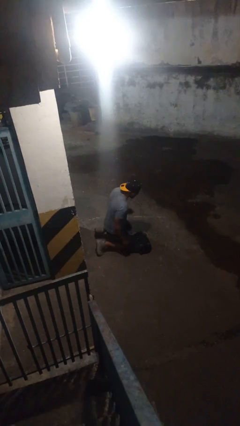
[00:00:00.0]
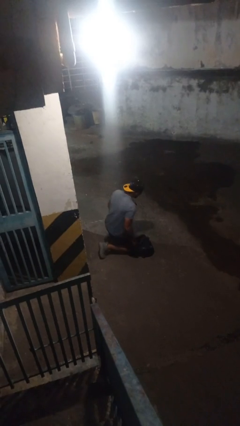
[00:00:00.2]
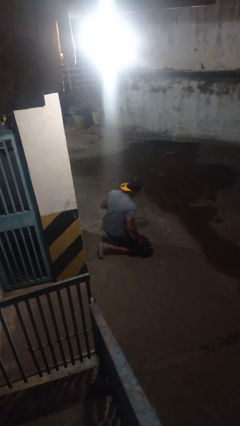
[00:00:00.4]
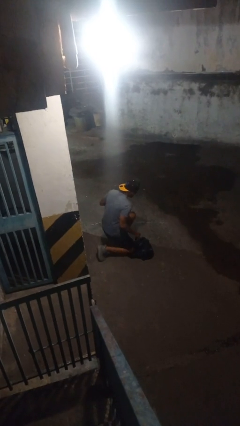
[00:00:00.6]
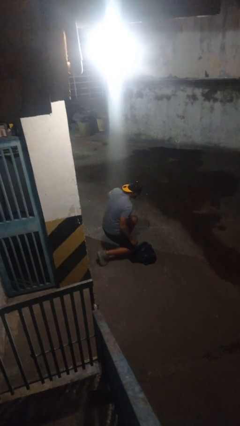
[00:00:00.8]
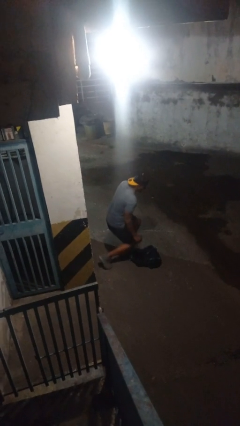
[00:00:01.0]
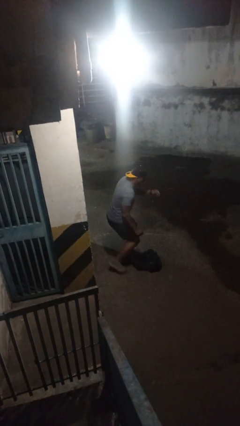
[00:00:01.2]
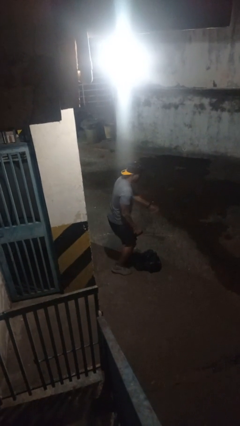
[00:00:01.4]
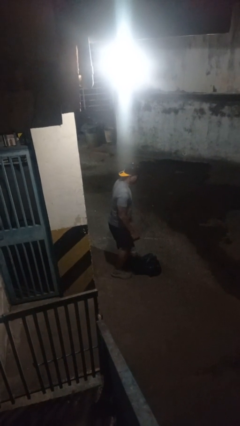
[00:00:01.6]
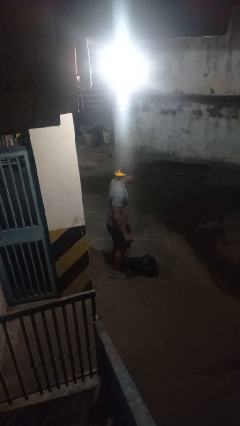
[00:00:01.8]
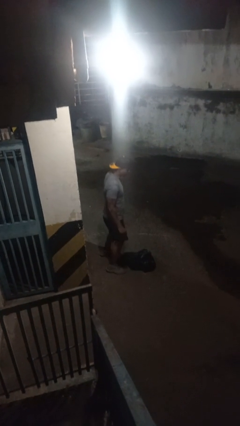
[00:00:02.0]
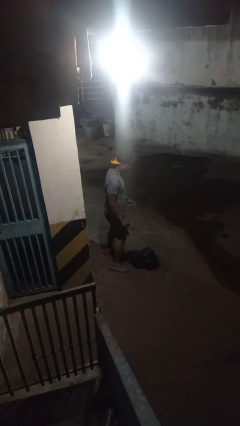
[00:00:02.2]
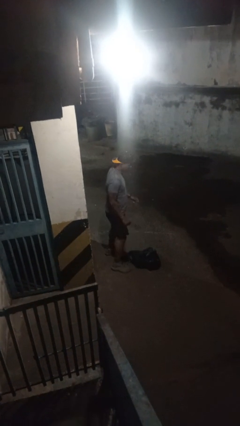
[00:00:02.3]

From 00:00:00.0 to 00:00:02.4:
person stands up from floor

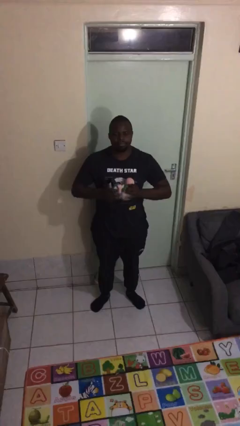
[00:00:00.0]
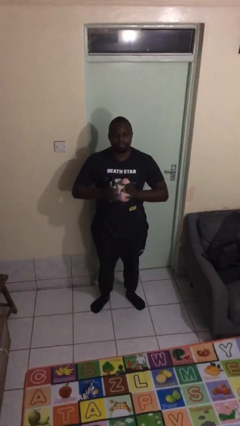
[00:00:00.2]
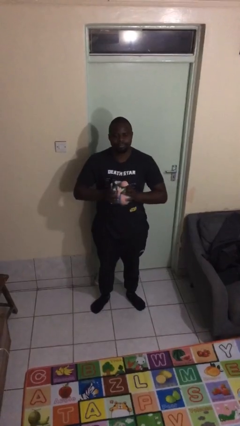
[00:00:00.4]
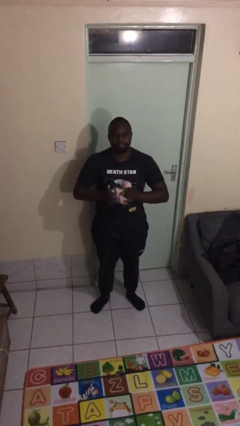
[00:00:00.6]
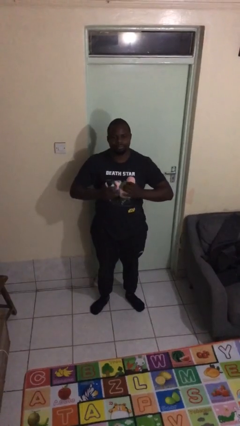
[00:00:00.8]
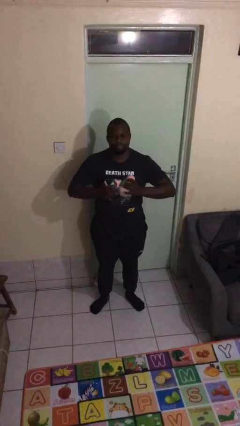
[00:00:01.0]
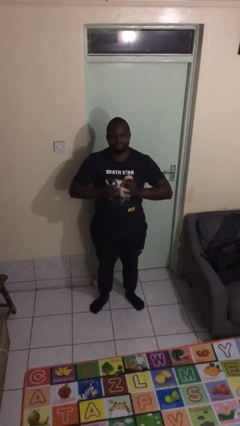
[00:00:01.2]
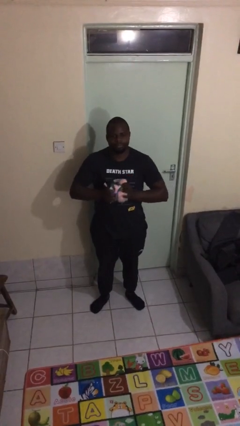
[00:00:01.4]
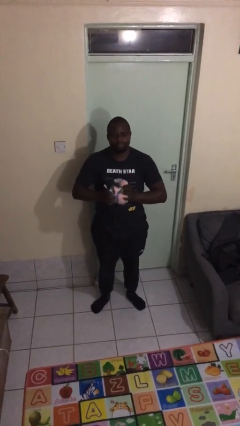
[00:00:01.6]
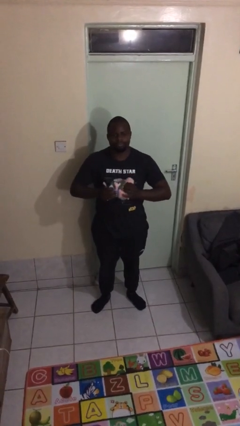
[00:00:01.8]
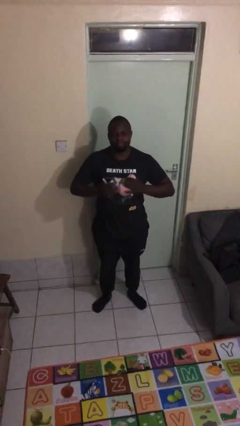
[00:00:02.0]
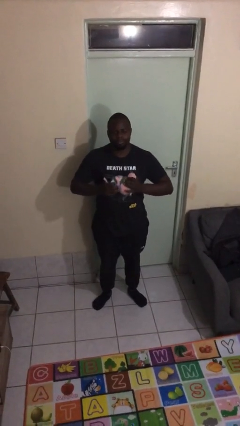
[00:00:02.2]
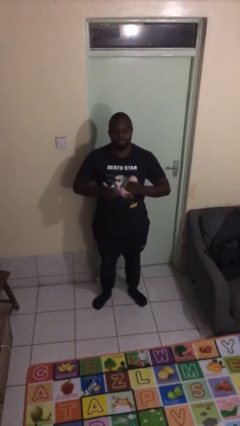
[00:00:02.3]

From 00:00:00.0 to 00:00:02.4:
person squeezes object

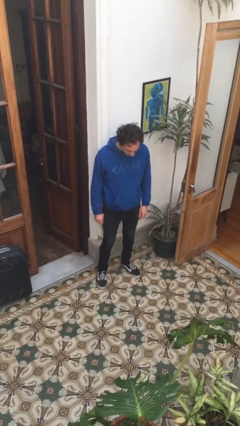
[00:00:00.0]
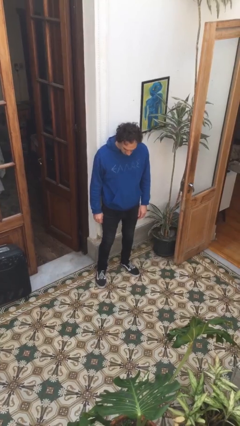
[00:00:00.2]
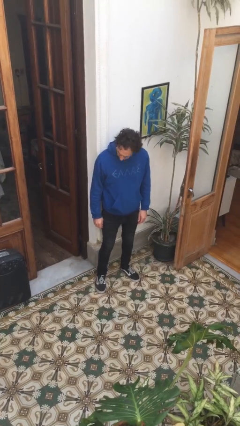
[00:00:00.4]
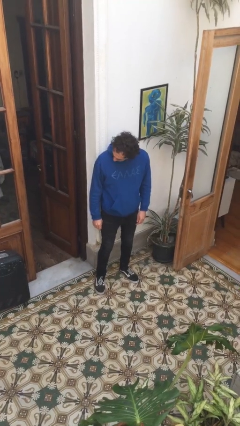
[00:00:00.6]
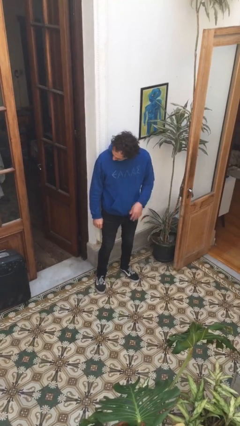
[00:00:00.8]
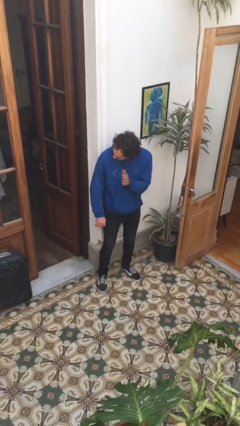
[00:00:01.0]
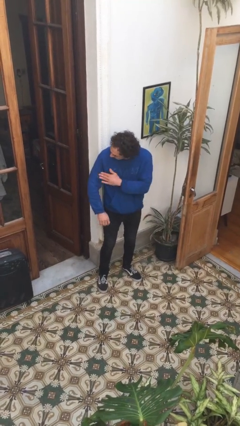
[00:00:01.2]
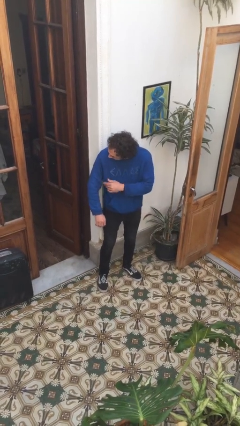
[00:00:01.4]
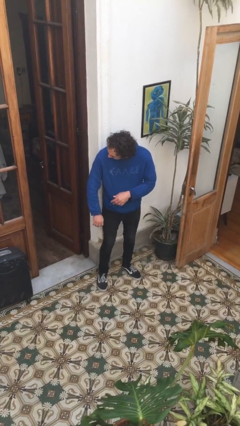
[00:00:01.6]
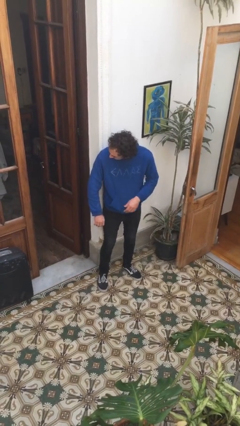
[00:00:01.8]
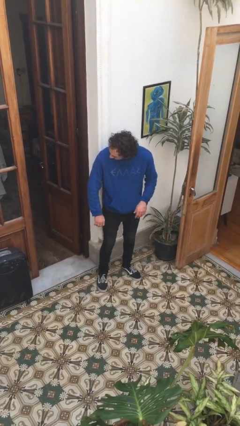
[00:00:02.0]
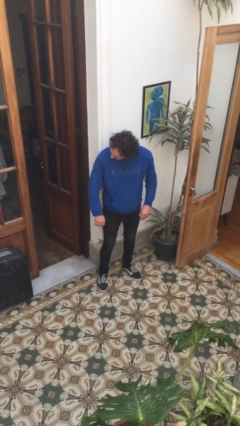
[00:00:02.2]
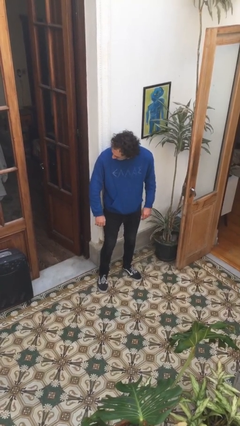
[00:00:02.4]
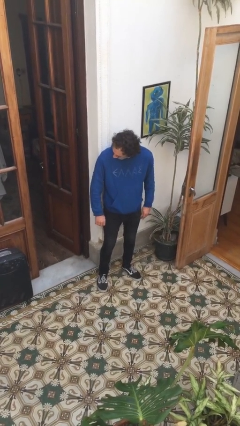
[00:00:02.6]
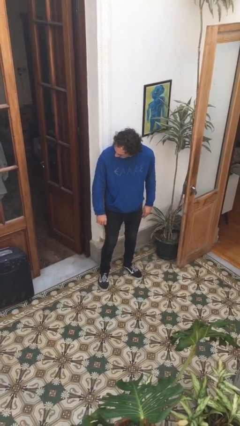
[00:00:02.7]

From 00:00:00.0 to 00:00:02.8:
person swats bug

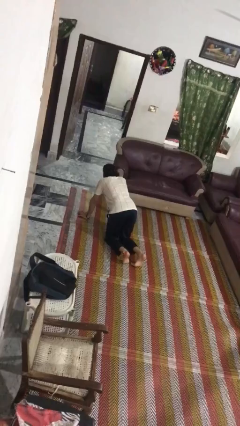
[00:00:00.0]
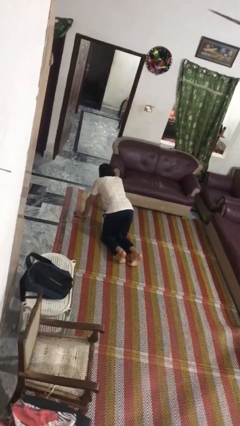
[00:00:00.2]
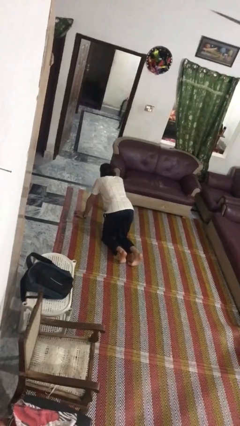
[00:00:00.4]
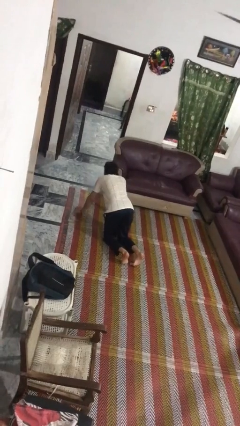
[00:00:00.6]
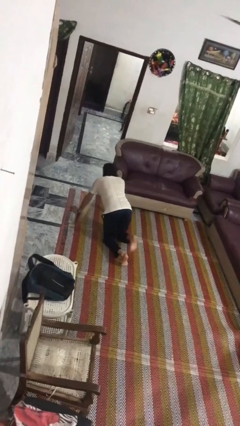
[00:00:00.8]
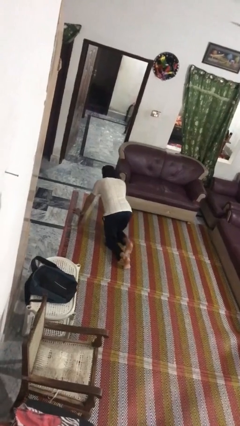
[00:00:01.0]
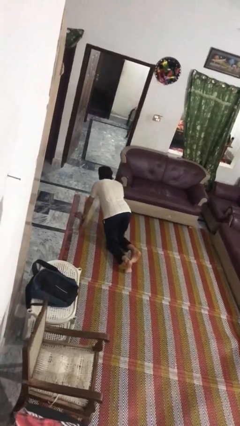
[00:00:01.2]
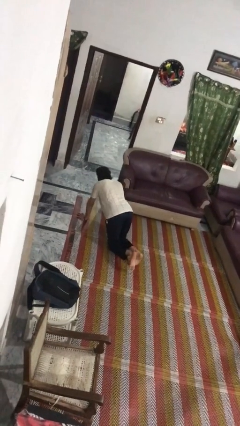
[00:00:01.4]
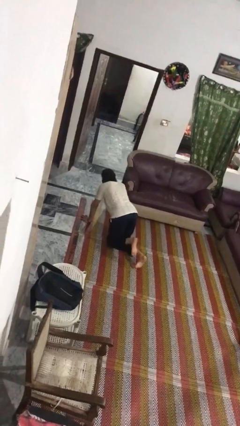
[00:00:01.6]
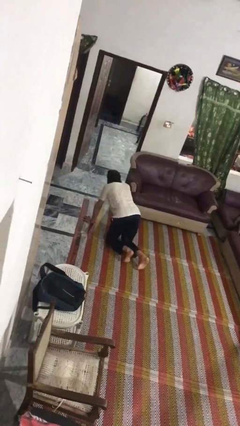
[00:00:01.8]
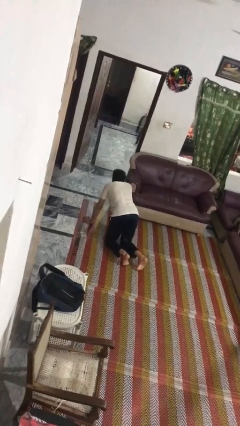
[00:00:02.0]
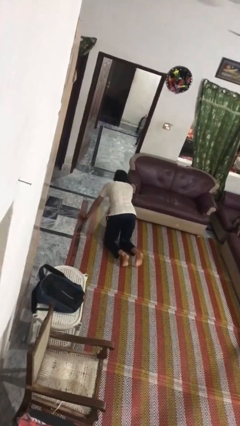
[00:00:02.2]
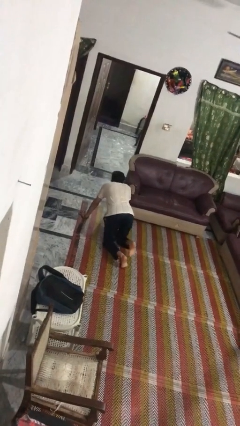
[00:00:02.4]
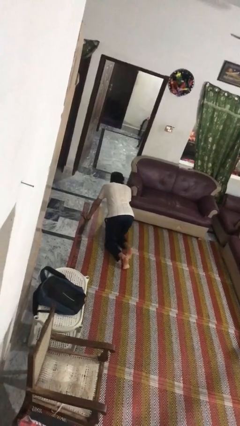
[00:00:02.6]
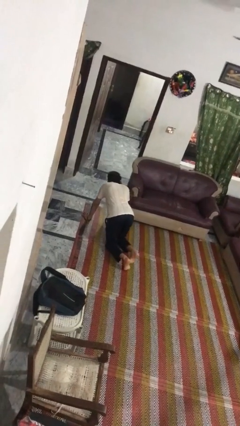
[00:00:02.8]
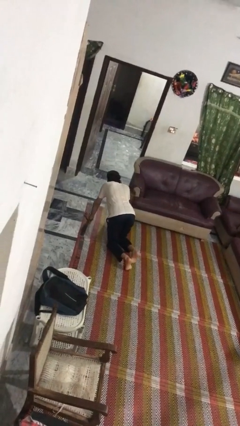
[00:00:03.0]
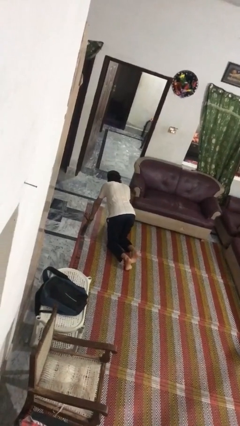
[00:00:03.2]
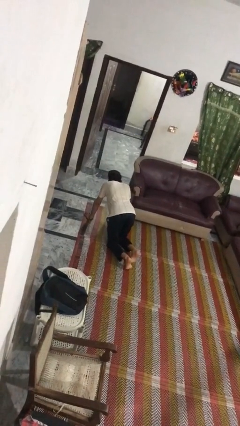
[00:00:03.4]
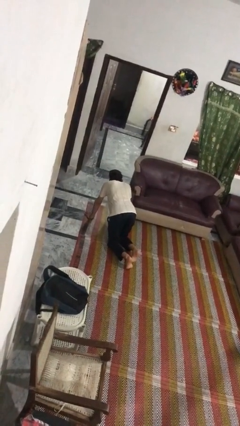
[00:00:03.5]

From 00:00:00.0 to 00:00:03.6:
person crawls

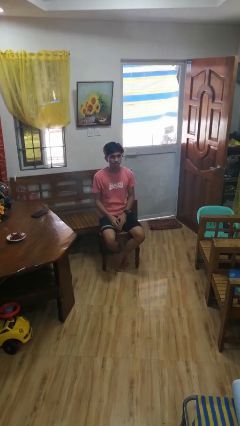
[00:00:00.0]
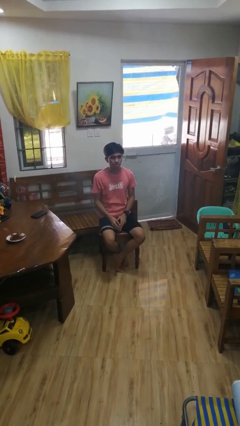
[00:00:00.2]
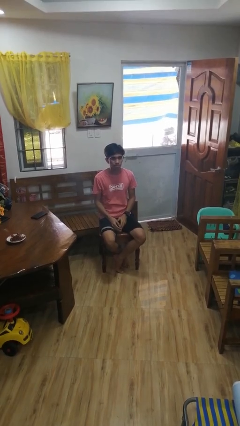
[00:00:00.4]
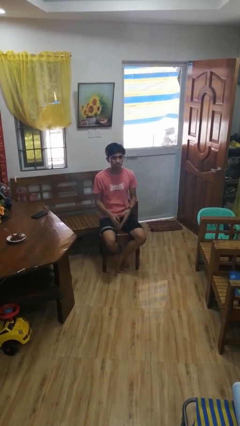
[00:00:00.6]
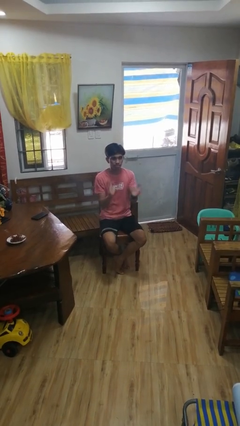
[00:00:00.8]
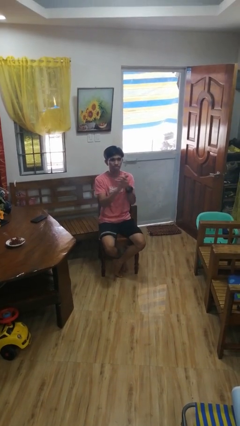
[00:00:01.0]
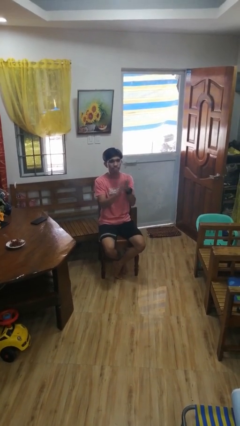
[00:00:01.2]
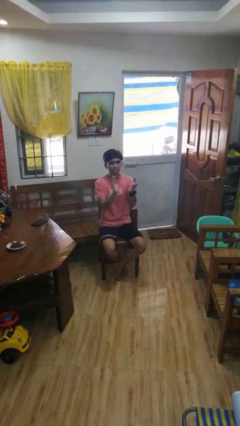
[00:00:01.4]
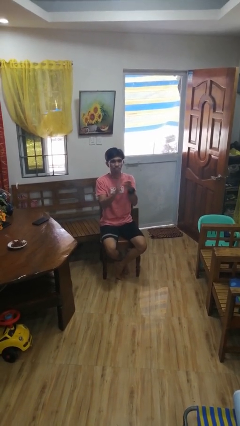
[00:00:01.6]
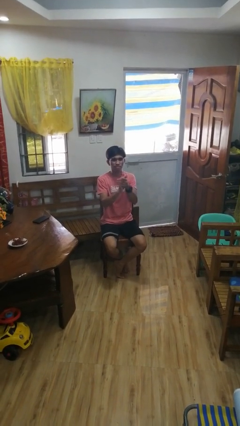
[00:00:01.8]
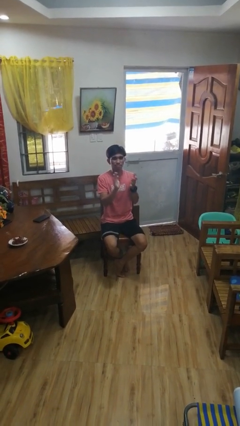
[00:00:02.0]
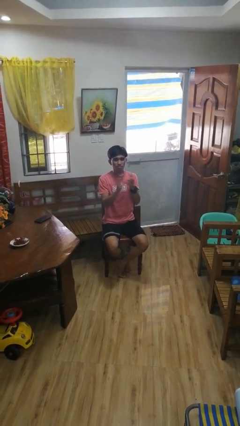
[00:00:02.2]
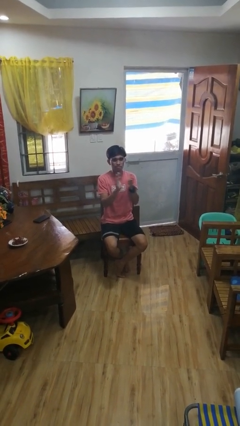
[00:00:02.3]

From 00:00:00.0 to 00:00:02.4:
person claps hands

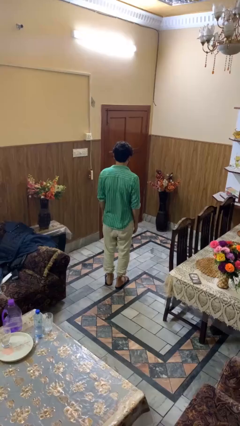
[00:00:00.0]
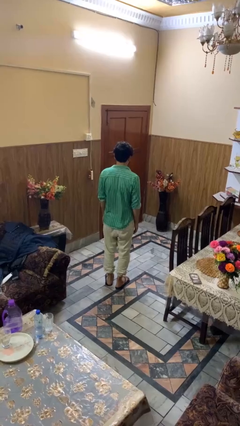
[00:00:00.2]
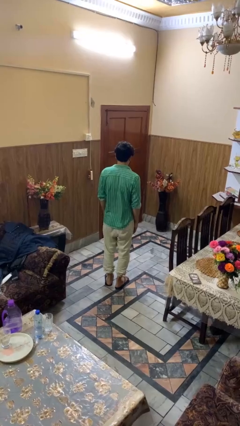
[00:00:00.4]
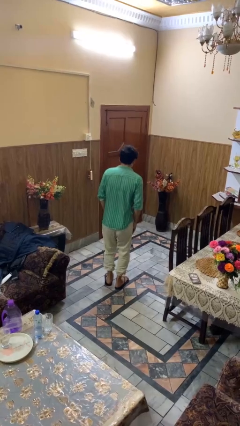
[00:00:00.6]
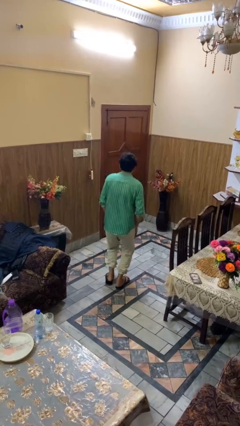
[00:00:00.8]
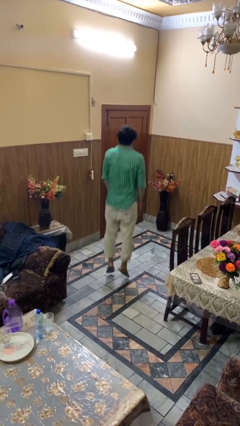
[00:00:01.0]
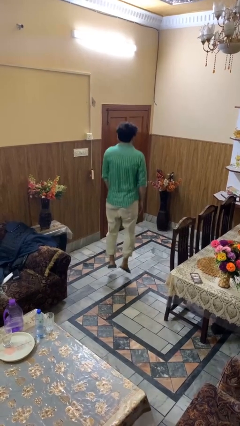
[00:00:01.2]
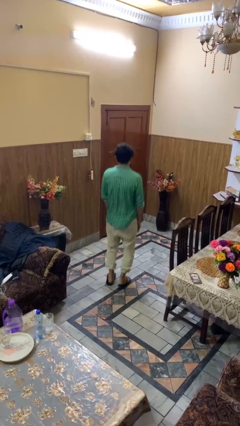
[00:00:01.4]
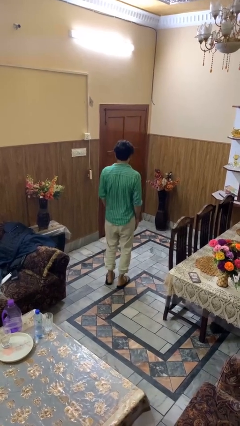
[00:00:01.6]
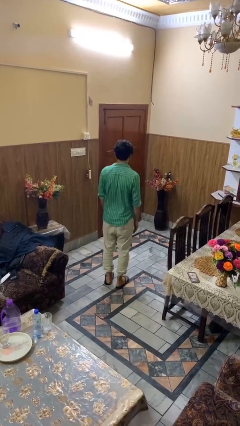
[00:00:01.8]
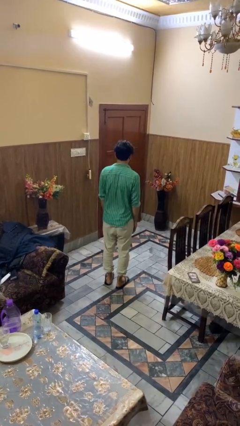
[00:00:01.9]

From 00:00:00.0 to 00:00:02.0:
person jumps

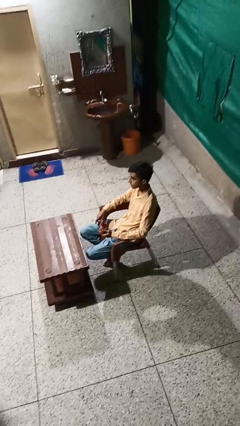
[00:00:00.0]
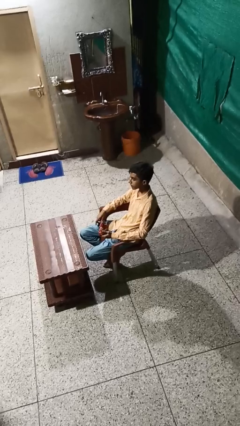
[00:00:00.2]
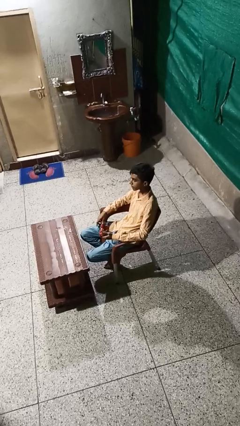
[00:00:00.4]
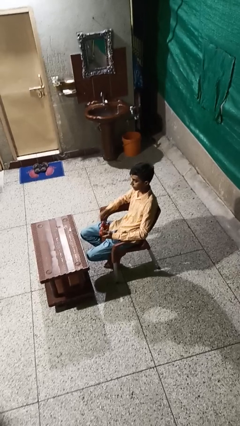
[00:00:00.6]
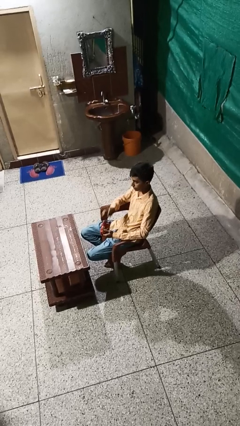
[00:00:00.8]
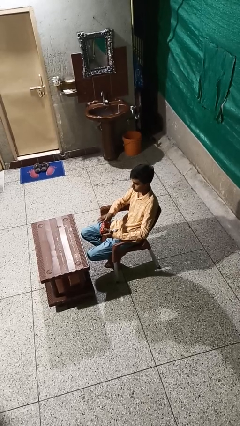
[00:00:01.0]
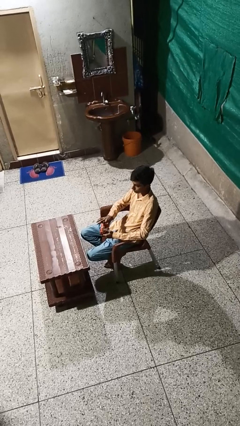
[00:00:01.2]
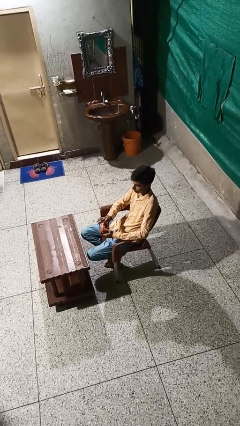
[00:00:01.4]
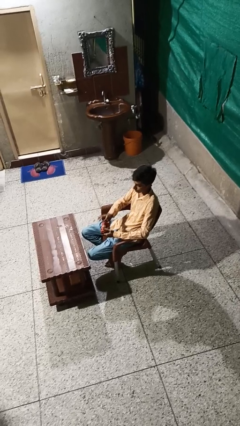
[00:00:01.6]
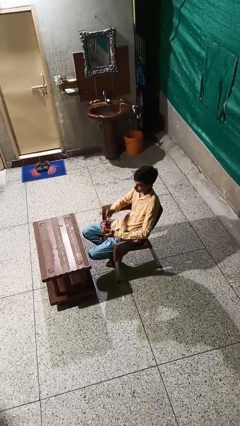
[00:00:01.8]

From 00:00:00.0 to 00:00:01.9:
person eats snack from bag
